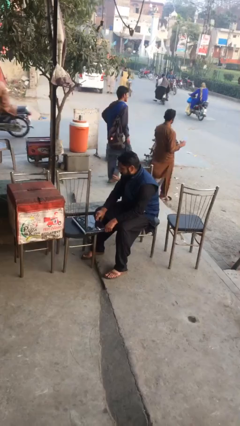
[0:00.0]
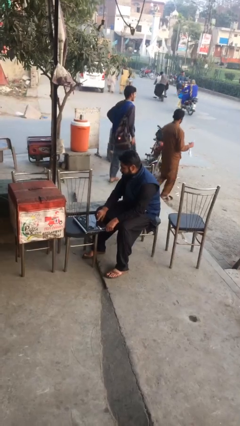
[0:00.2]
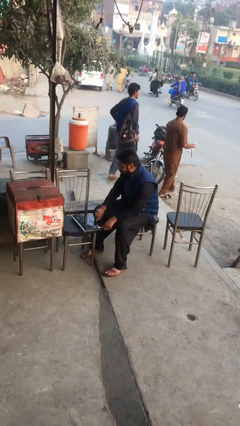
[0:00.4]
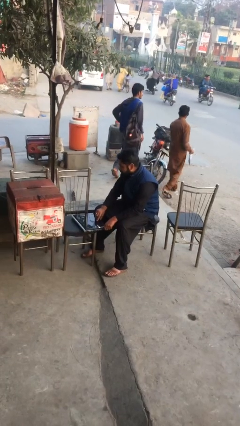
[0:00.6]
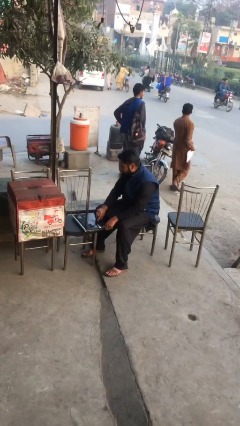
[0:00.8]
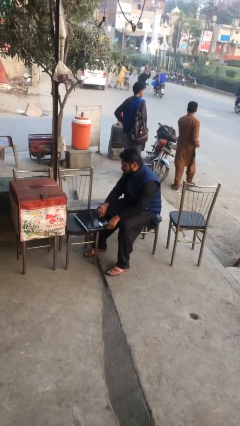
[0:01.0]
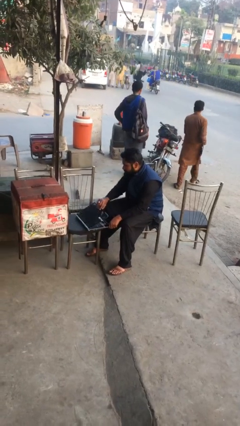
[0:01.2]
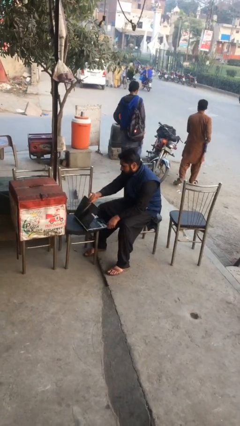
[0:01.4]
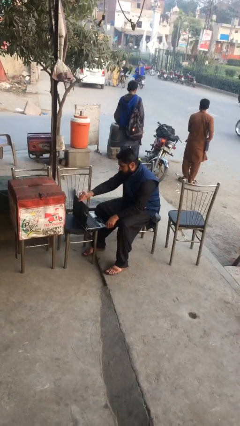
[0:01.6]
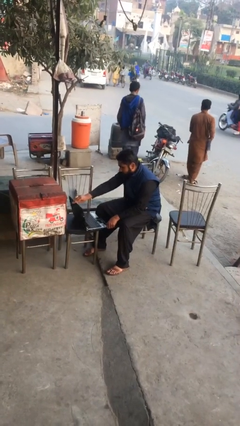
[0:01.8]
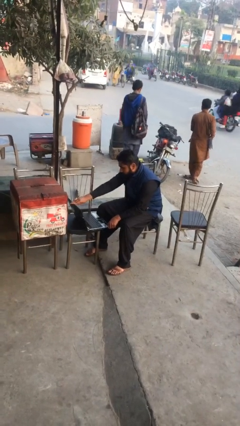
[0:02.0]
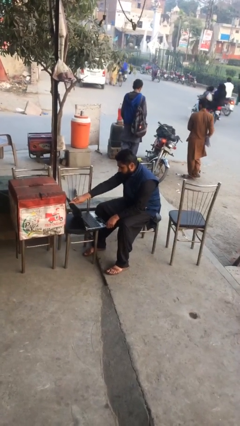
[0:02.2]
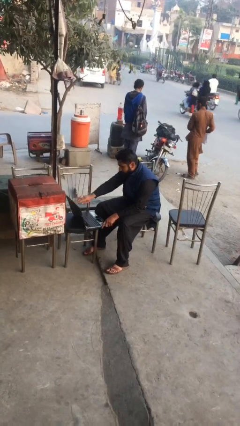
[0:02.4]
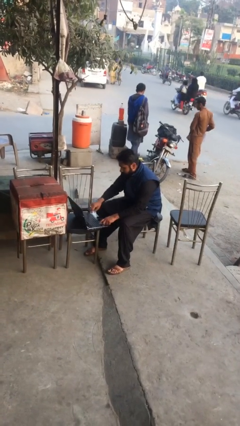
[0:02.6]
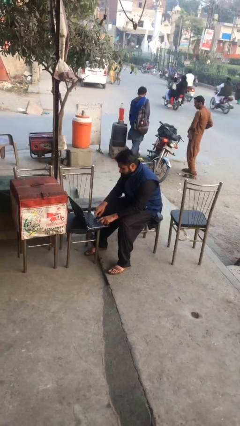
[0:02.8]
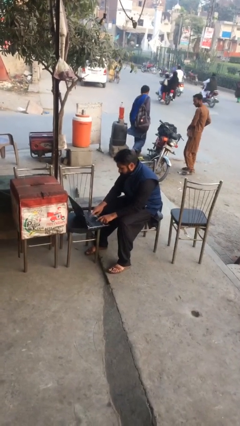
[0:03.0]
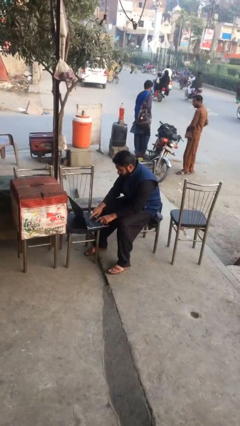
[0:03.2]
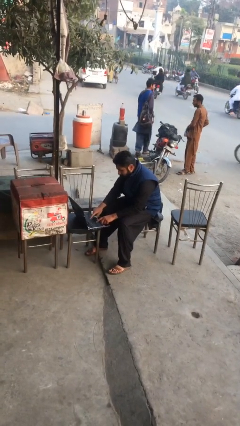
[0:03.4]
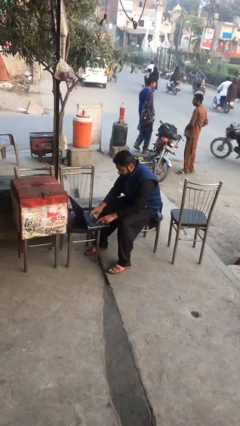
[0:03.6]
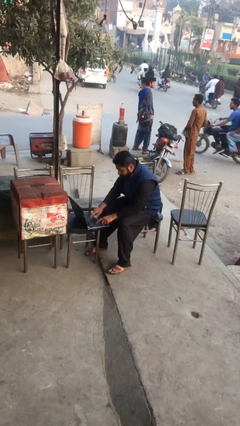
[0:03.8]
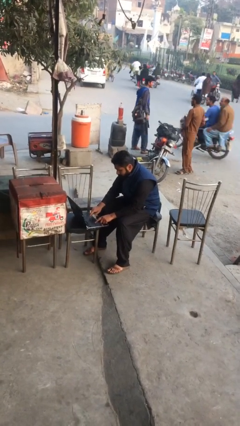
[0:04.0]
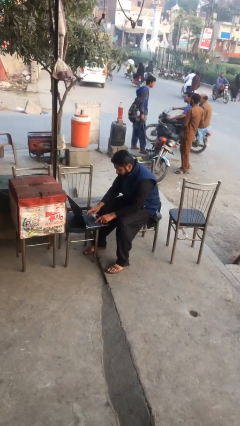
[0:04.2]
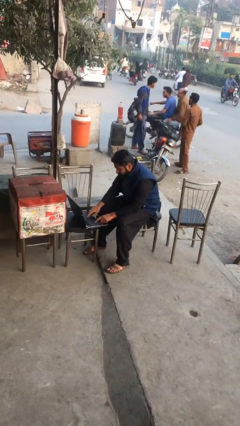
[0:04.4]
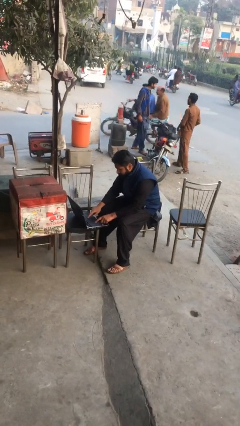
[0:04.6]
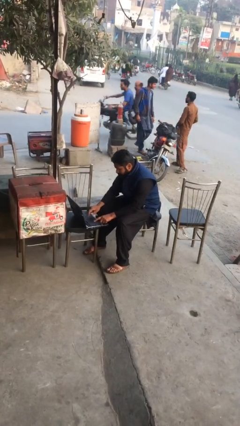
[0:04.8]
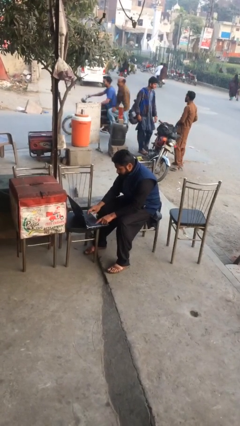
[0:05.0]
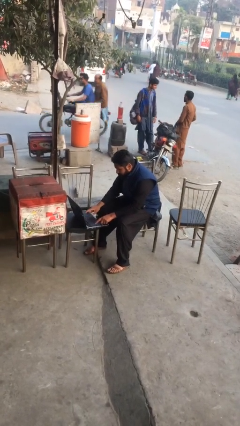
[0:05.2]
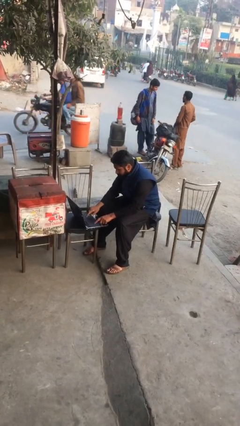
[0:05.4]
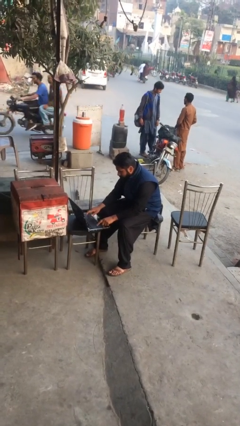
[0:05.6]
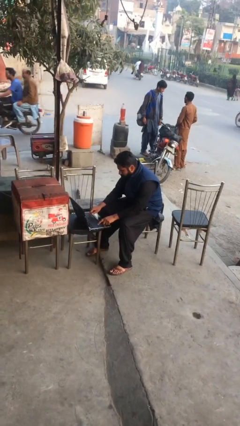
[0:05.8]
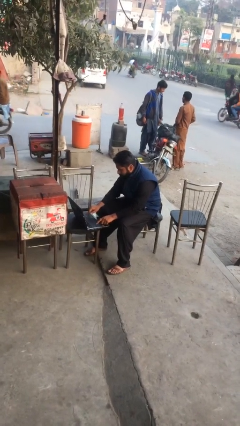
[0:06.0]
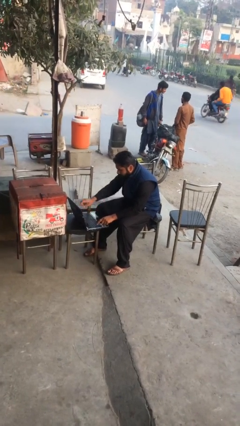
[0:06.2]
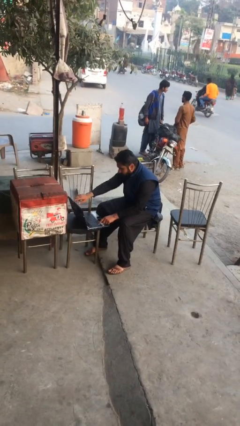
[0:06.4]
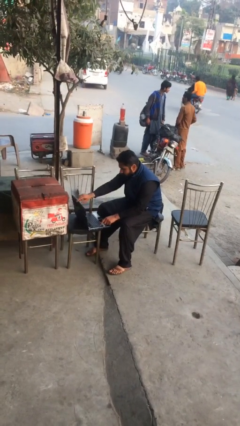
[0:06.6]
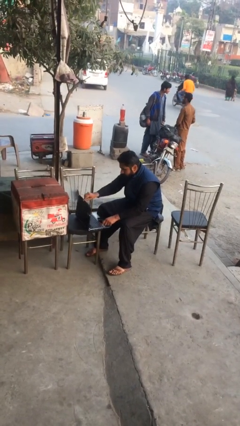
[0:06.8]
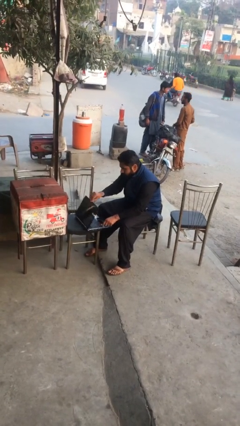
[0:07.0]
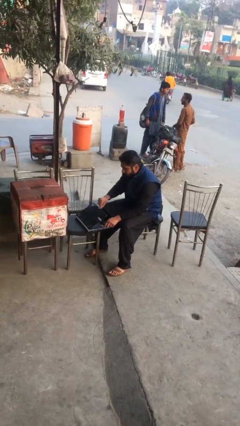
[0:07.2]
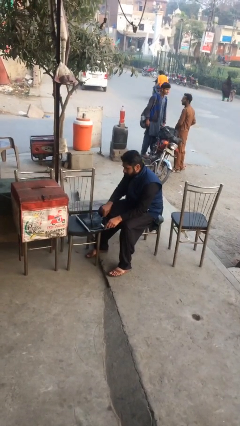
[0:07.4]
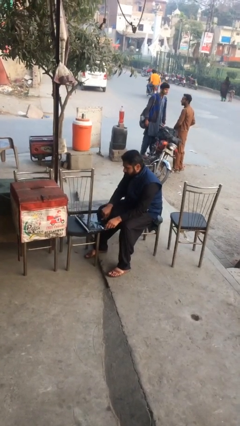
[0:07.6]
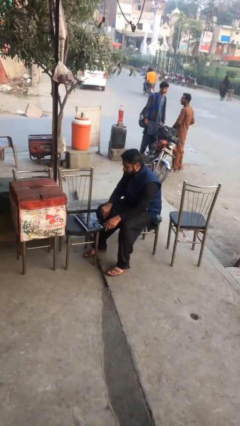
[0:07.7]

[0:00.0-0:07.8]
person interacts with laptop

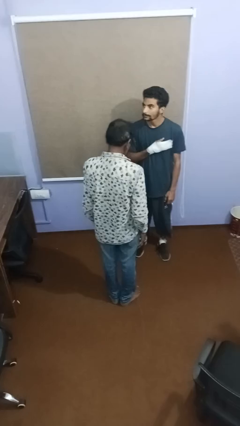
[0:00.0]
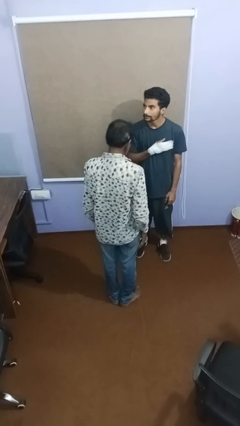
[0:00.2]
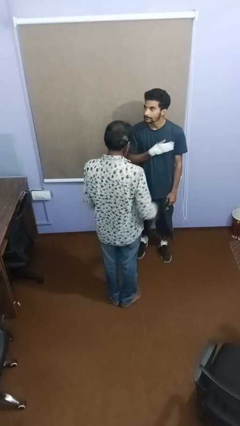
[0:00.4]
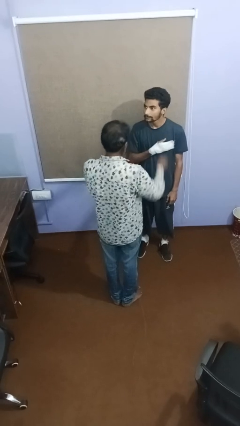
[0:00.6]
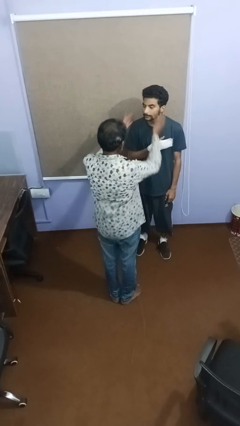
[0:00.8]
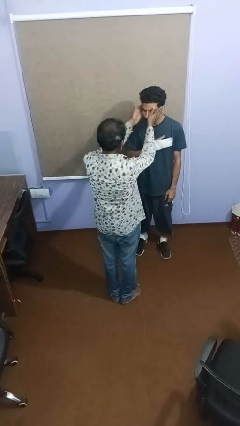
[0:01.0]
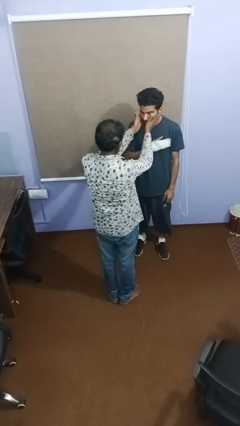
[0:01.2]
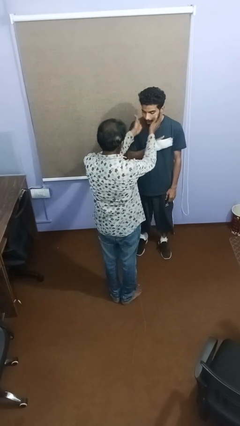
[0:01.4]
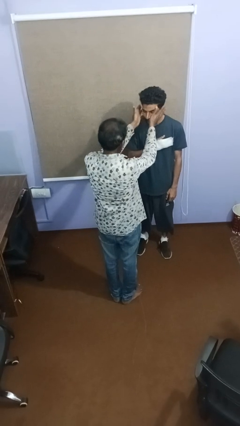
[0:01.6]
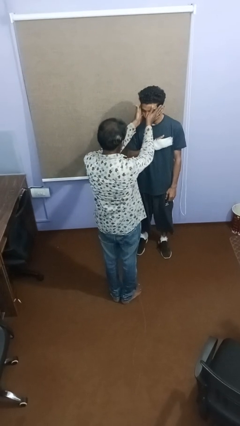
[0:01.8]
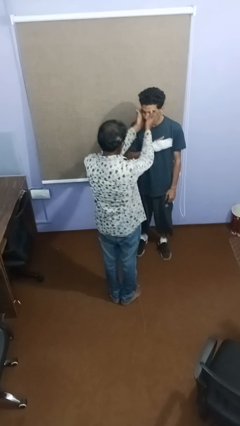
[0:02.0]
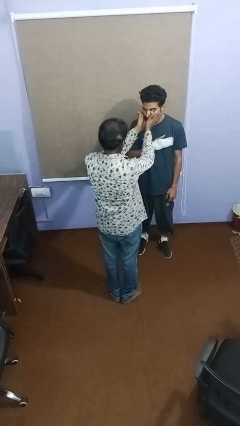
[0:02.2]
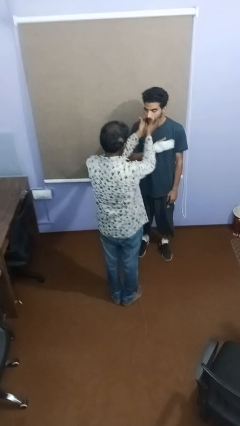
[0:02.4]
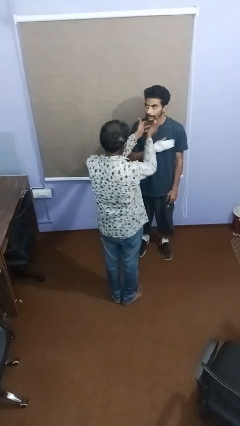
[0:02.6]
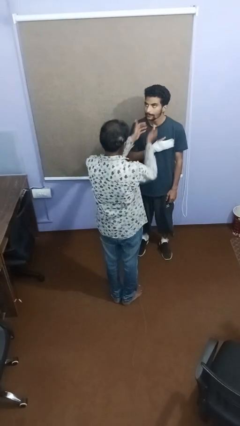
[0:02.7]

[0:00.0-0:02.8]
person touches face of person

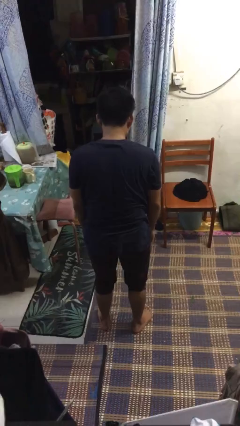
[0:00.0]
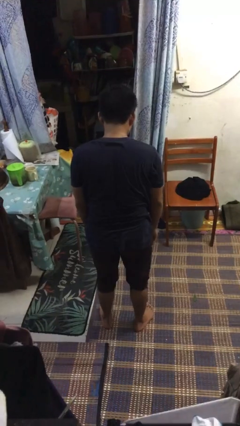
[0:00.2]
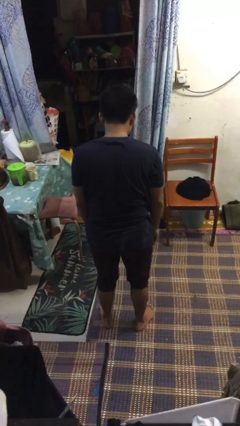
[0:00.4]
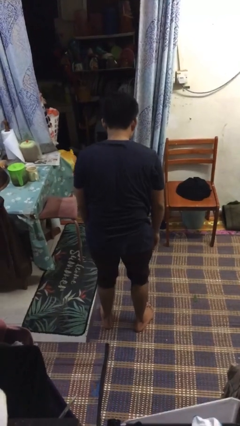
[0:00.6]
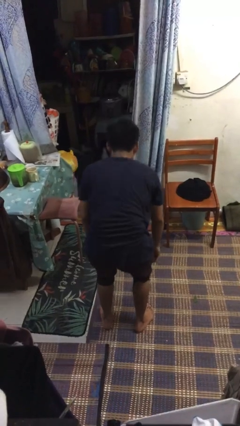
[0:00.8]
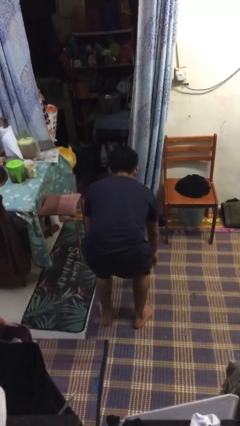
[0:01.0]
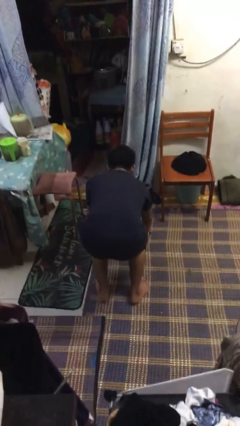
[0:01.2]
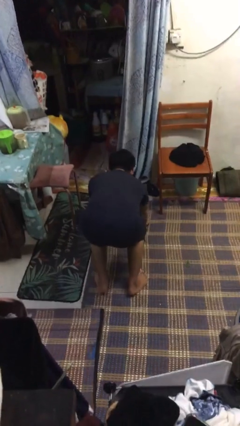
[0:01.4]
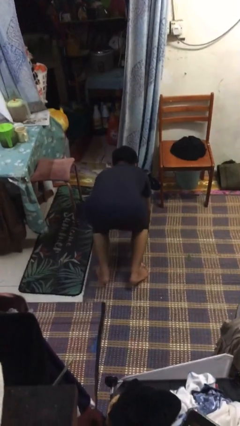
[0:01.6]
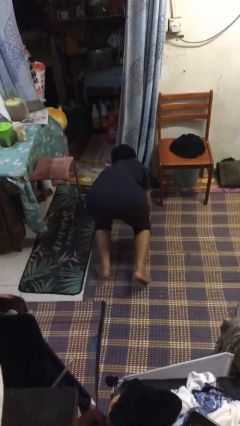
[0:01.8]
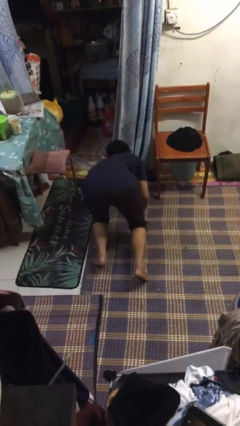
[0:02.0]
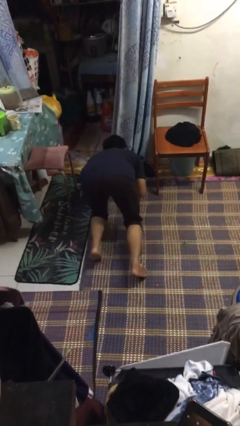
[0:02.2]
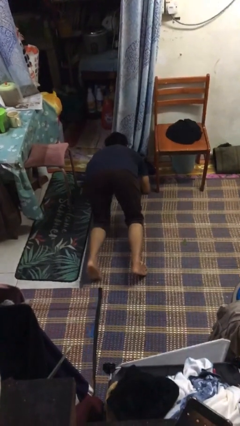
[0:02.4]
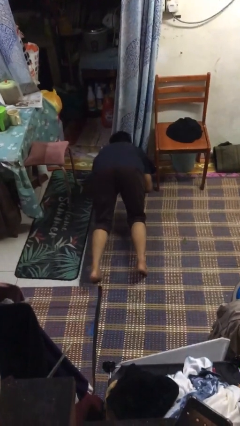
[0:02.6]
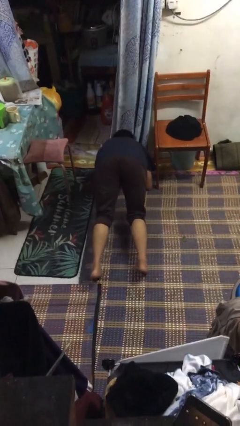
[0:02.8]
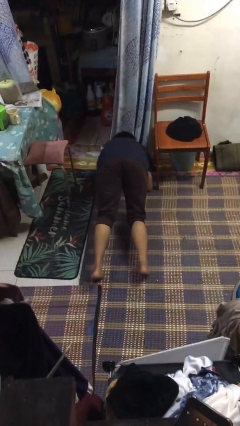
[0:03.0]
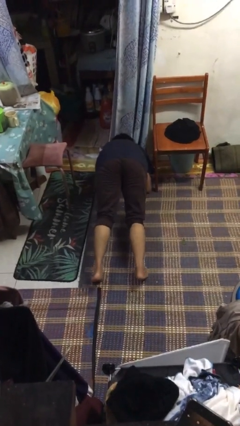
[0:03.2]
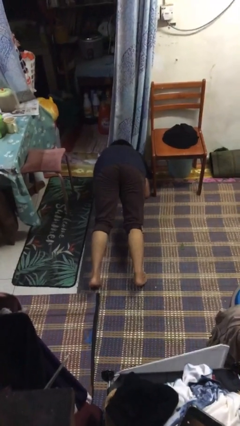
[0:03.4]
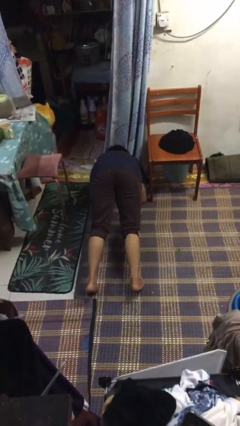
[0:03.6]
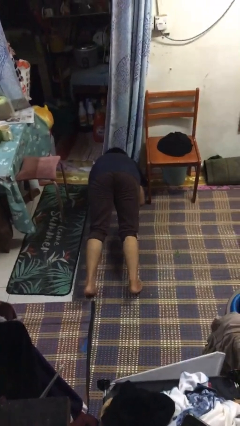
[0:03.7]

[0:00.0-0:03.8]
person exercises with plank

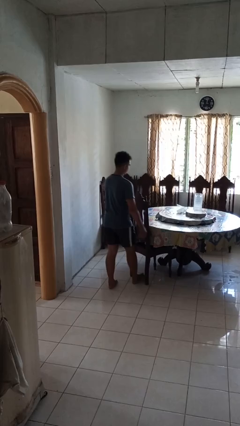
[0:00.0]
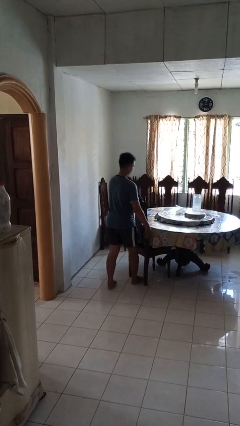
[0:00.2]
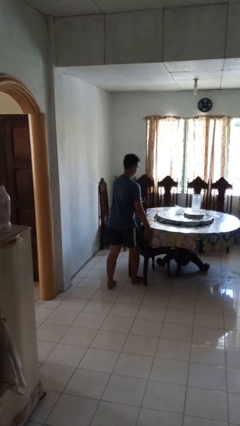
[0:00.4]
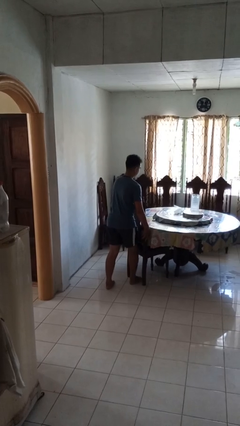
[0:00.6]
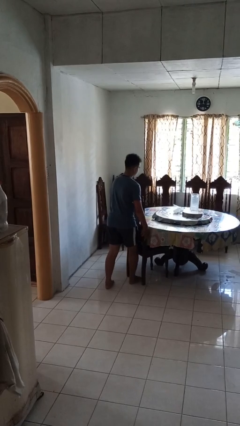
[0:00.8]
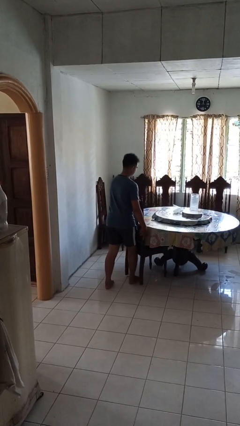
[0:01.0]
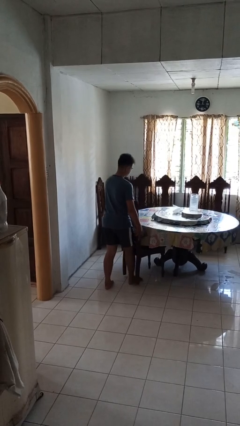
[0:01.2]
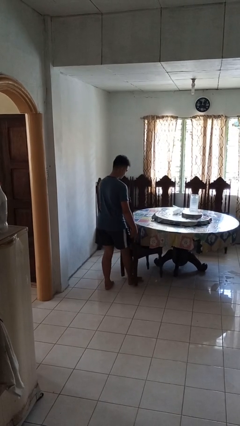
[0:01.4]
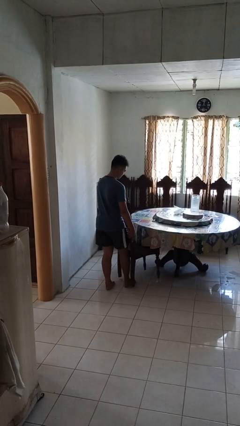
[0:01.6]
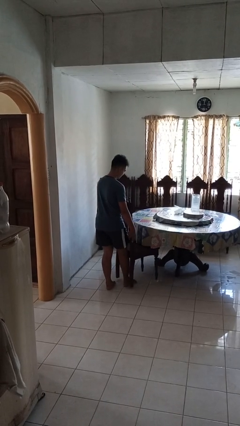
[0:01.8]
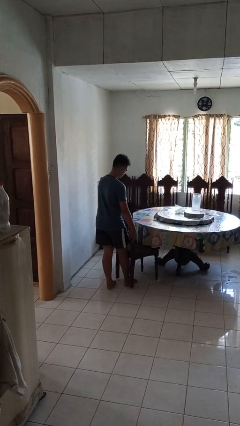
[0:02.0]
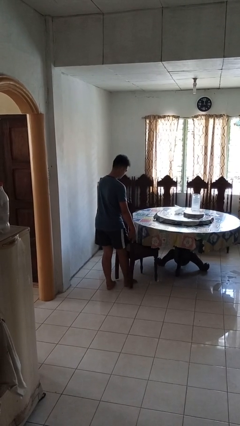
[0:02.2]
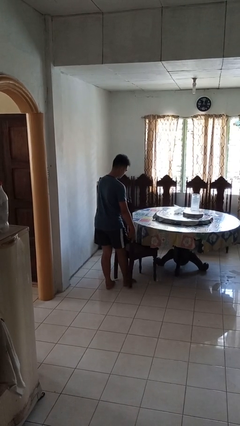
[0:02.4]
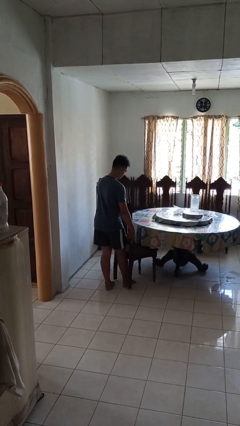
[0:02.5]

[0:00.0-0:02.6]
person pulls out chair

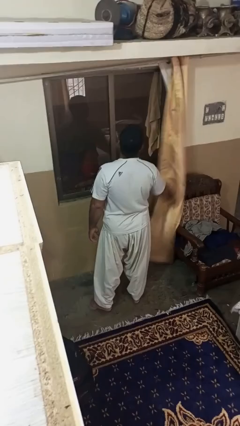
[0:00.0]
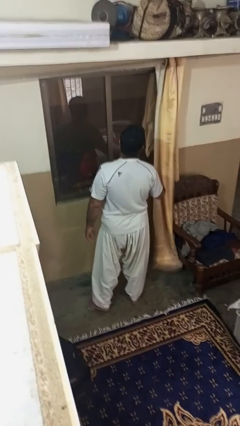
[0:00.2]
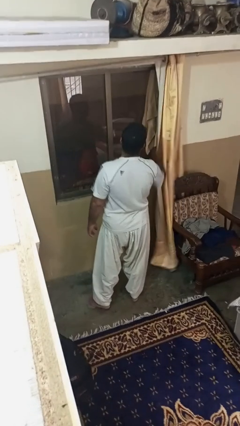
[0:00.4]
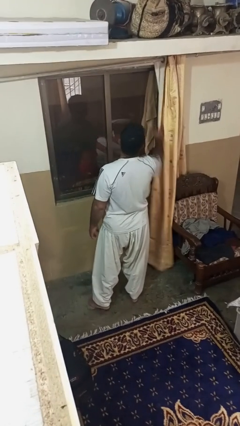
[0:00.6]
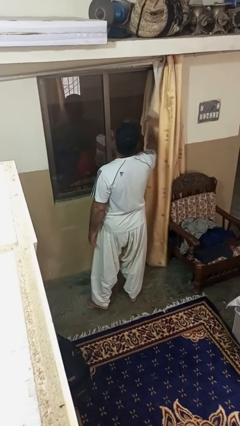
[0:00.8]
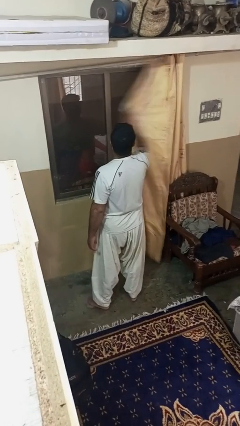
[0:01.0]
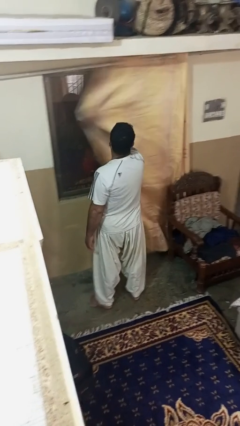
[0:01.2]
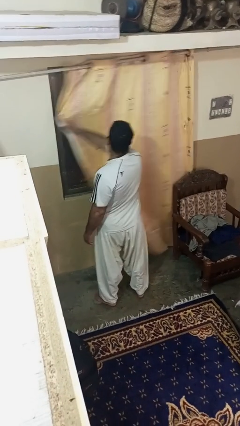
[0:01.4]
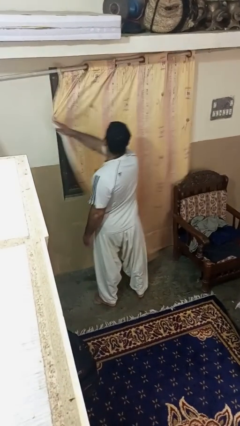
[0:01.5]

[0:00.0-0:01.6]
person closes curtains
